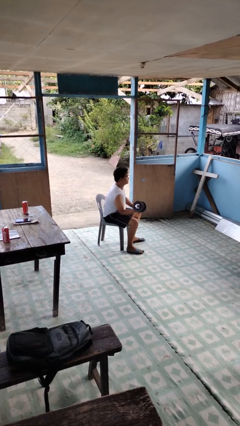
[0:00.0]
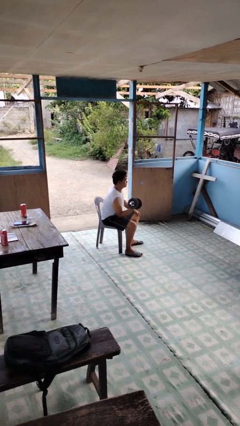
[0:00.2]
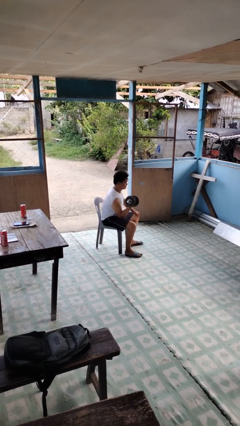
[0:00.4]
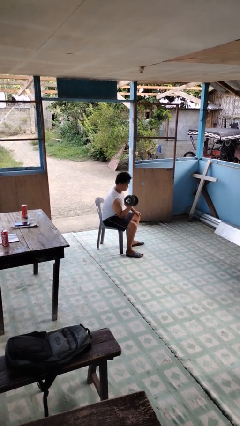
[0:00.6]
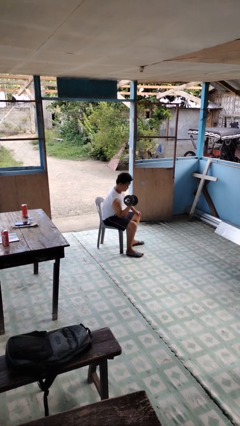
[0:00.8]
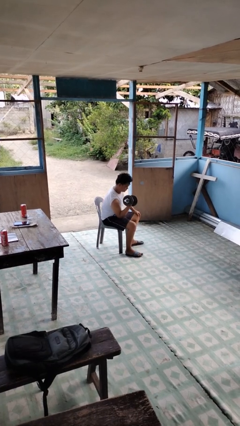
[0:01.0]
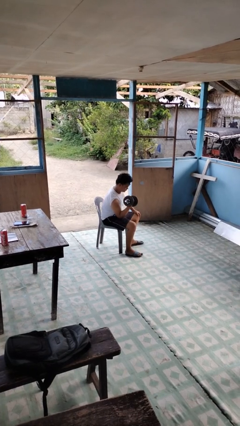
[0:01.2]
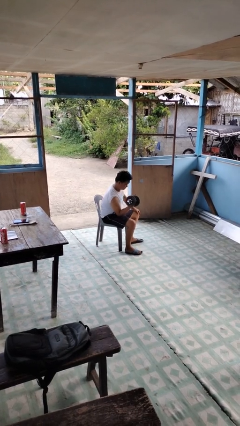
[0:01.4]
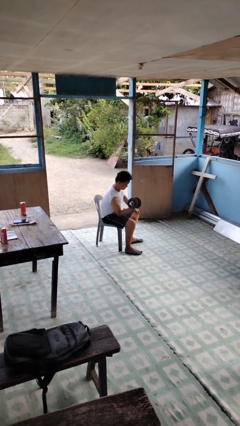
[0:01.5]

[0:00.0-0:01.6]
person lifts dumbbells

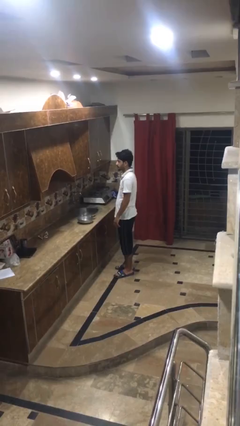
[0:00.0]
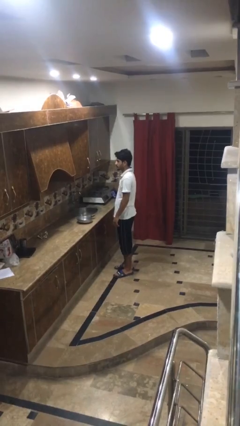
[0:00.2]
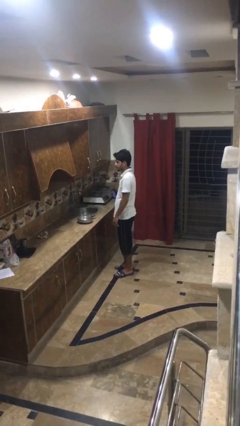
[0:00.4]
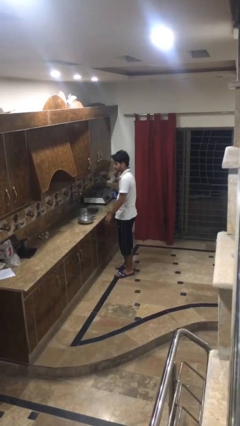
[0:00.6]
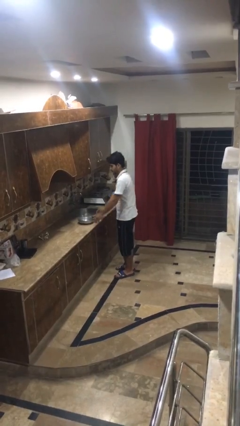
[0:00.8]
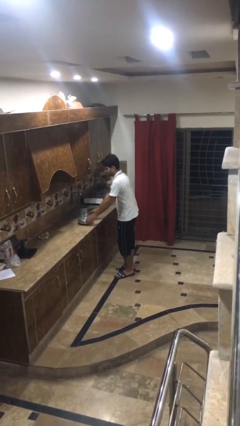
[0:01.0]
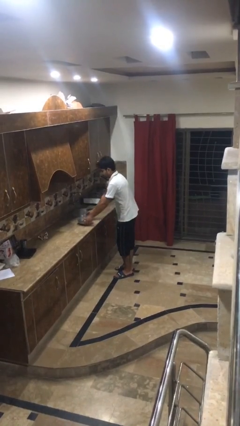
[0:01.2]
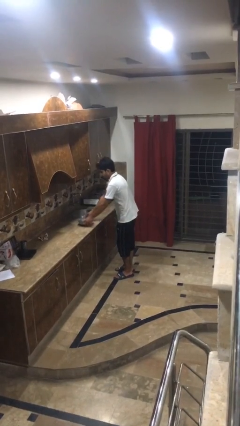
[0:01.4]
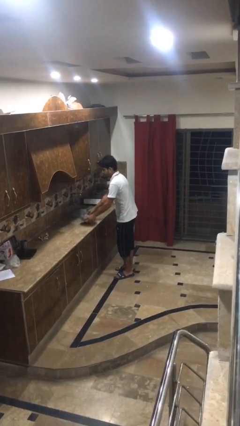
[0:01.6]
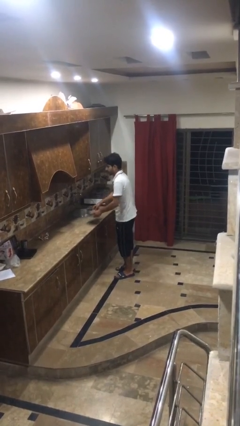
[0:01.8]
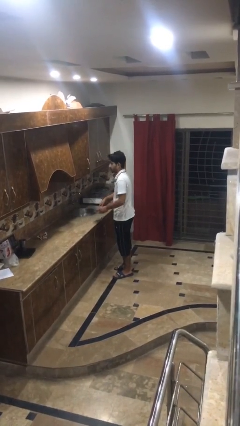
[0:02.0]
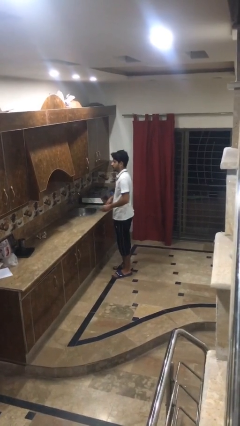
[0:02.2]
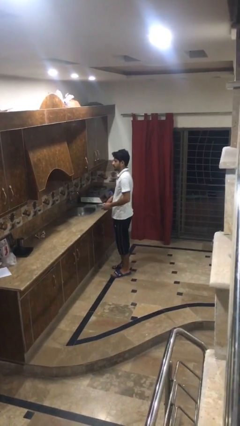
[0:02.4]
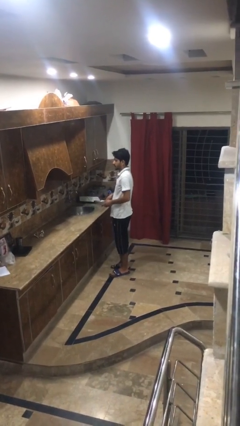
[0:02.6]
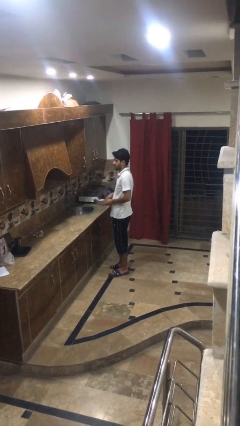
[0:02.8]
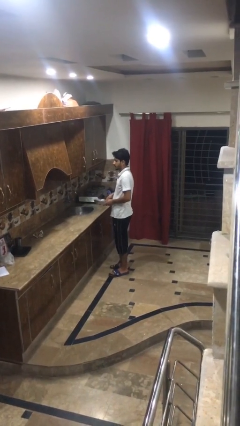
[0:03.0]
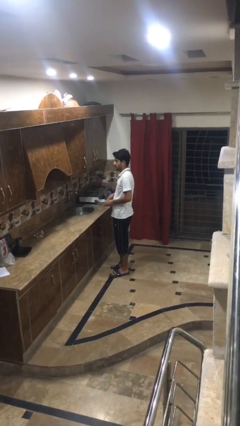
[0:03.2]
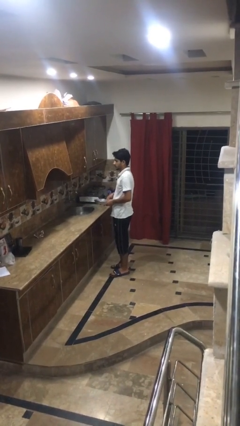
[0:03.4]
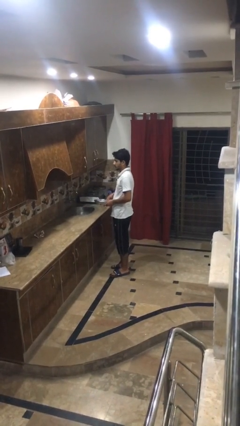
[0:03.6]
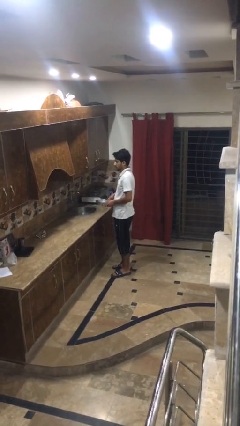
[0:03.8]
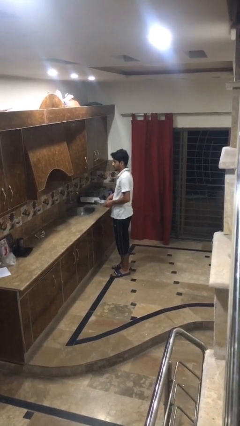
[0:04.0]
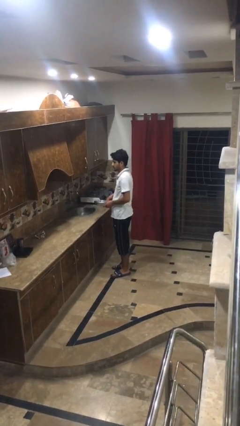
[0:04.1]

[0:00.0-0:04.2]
person picks up object from countertop

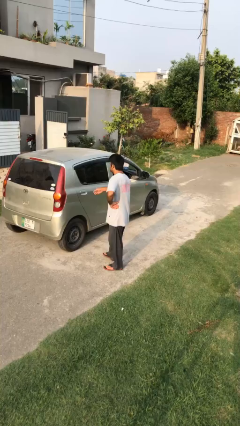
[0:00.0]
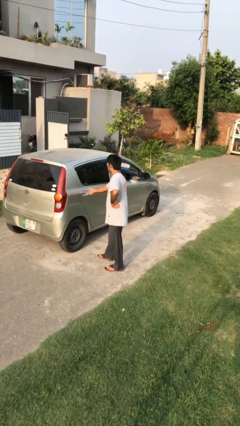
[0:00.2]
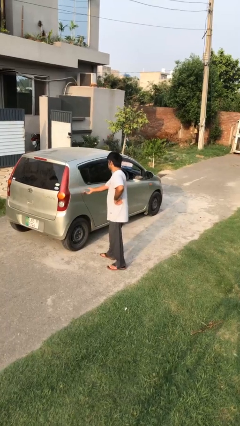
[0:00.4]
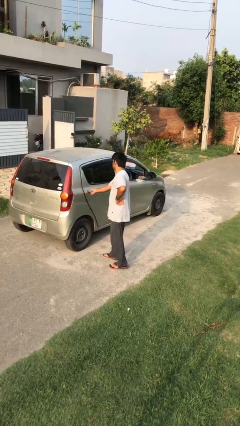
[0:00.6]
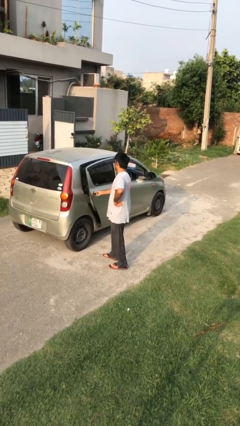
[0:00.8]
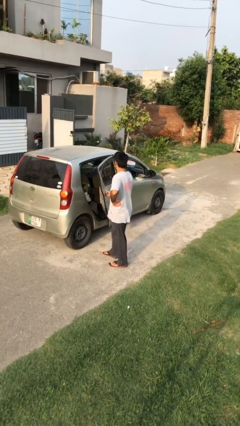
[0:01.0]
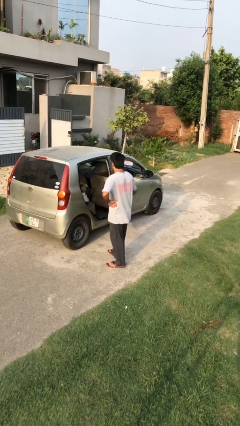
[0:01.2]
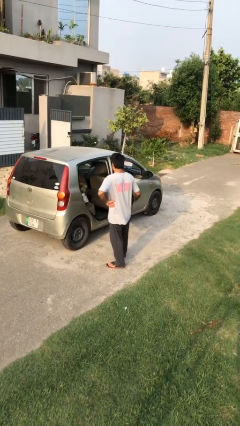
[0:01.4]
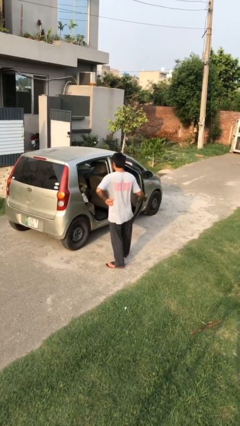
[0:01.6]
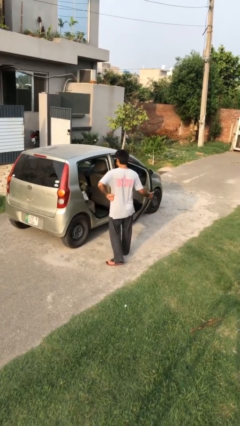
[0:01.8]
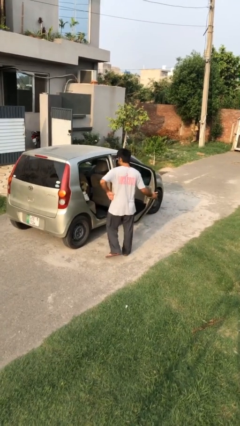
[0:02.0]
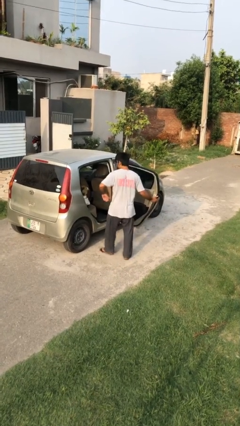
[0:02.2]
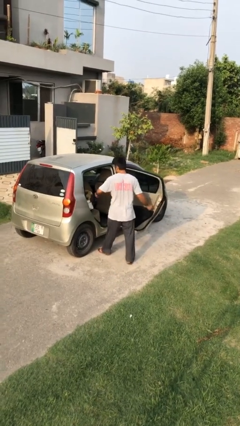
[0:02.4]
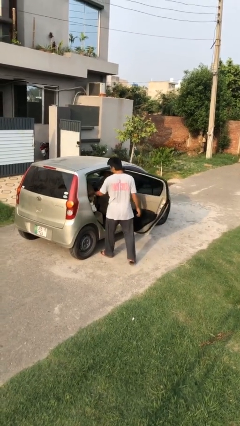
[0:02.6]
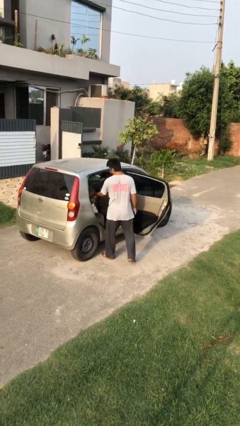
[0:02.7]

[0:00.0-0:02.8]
person opens car door

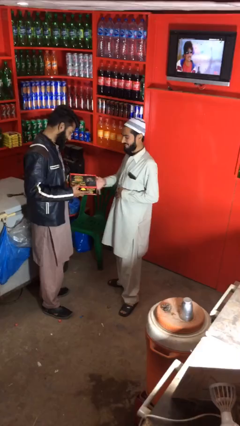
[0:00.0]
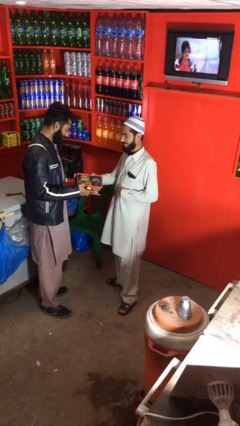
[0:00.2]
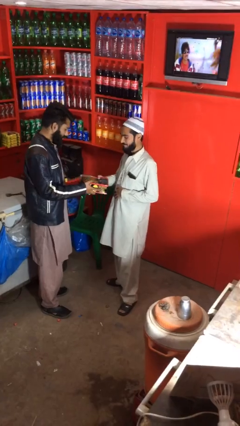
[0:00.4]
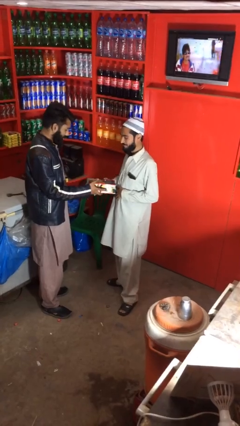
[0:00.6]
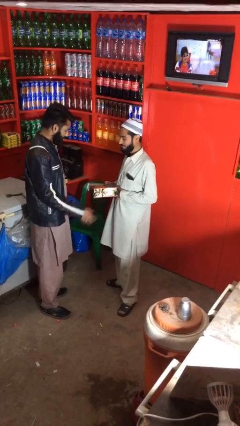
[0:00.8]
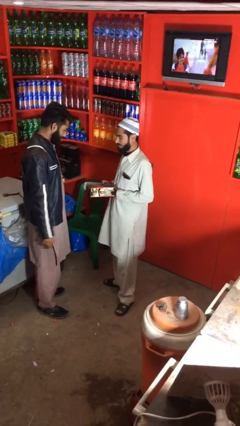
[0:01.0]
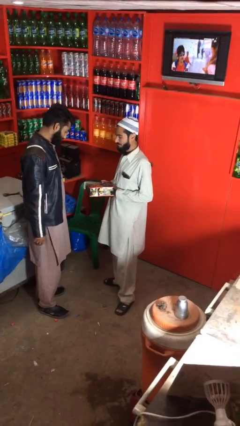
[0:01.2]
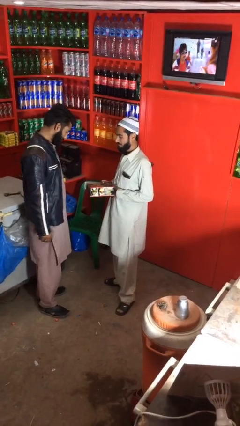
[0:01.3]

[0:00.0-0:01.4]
person transfers object to person

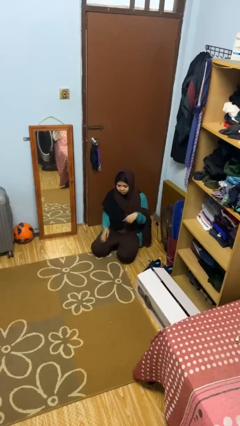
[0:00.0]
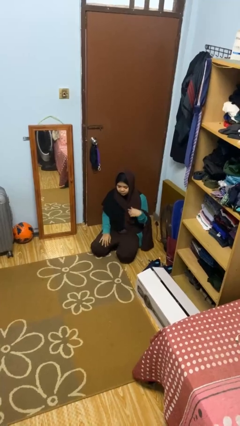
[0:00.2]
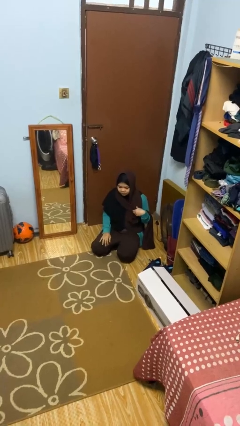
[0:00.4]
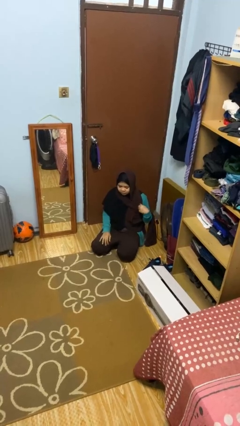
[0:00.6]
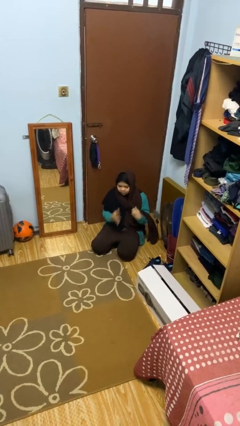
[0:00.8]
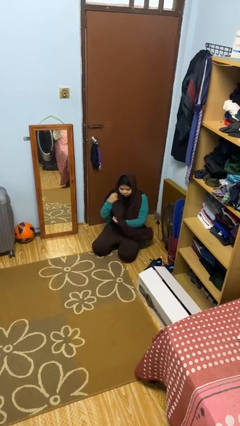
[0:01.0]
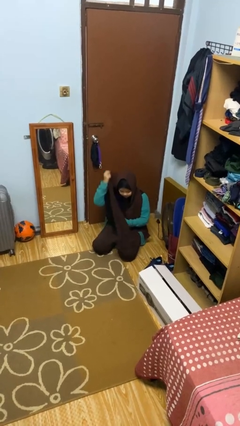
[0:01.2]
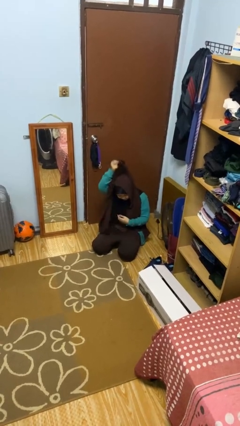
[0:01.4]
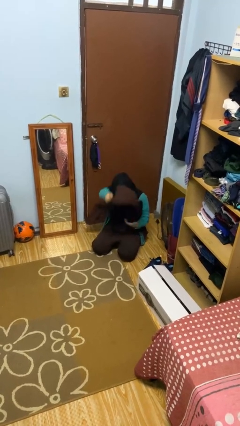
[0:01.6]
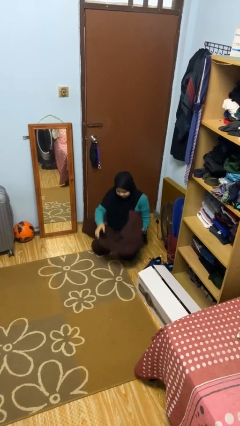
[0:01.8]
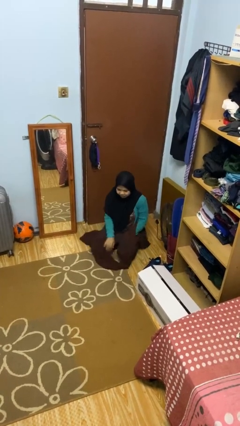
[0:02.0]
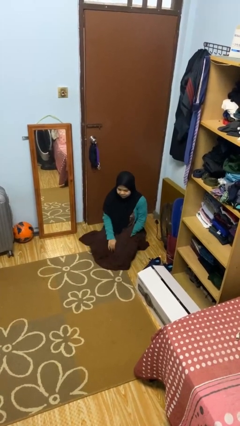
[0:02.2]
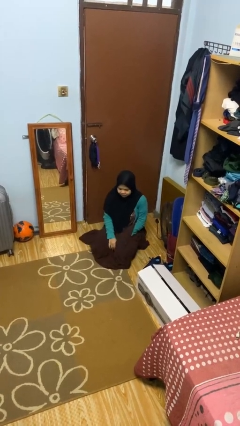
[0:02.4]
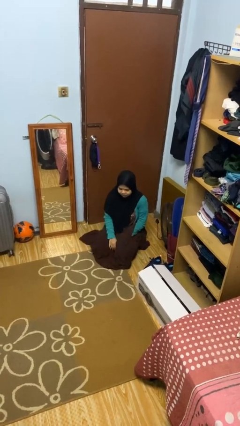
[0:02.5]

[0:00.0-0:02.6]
person takes off scarf

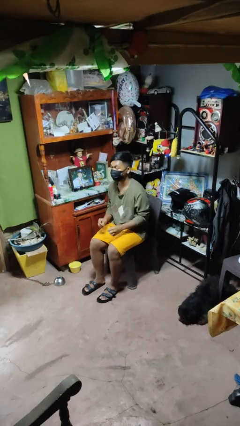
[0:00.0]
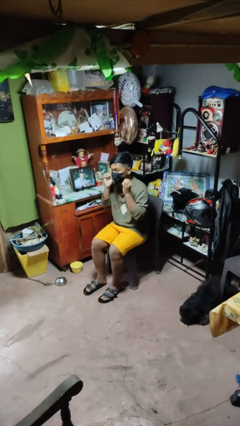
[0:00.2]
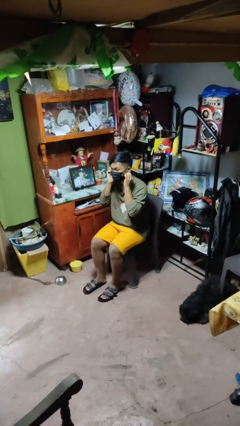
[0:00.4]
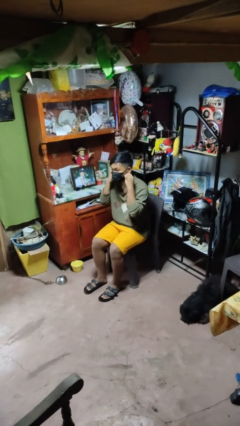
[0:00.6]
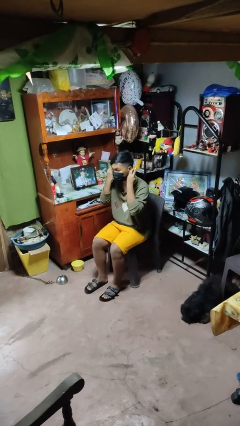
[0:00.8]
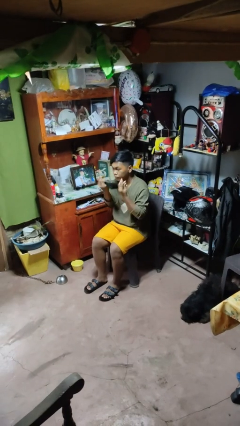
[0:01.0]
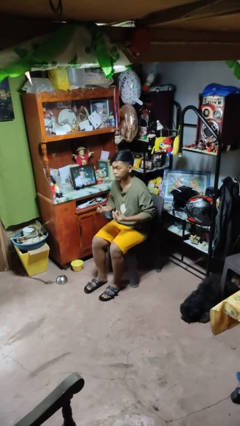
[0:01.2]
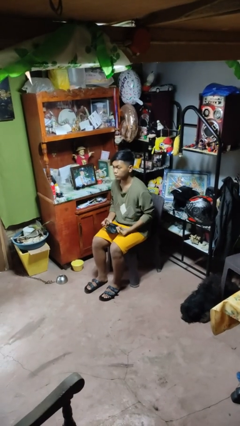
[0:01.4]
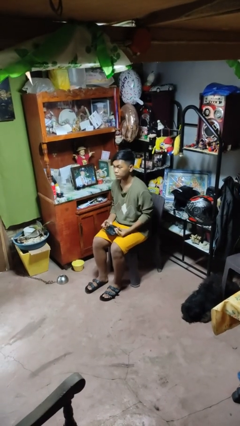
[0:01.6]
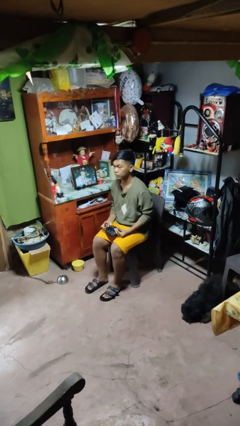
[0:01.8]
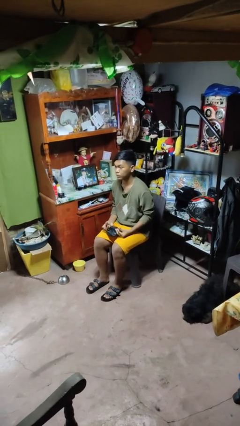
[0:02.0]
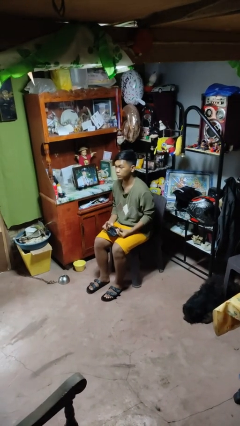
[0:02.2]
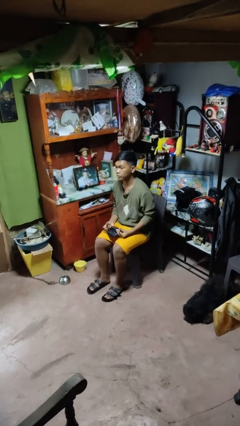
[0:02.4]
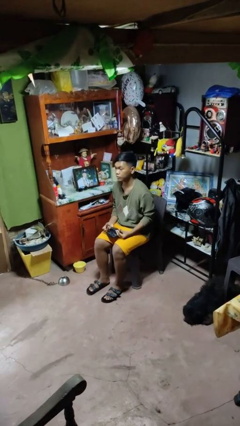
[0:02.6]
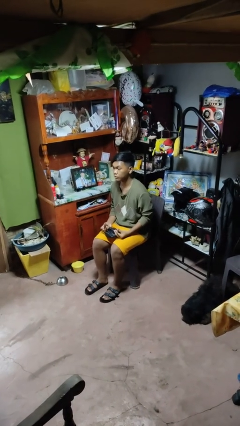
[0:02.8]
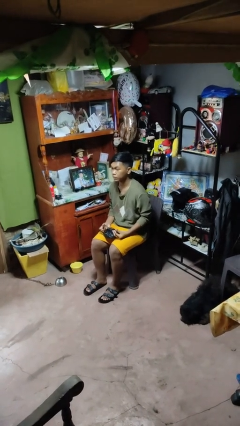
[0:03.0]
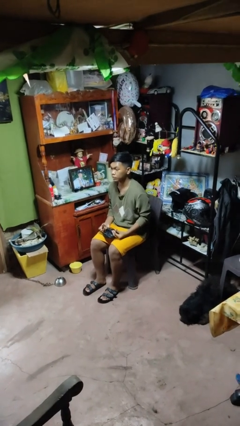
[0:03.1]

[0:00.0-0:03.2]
person takes off facemask

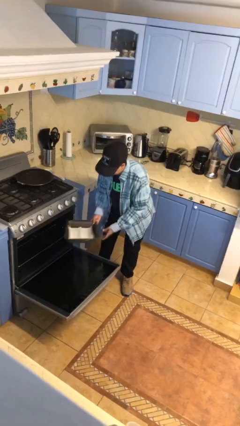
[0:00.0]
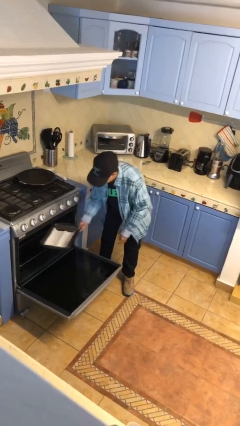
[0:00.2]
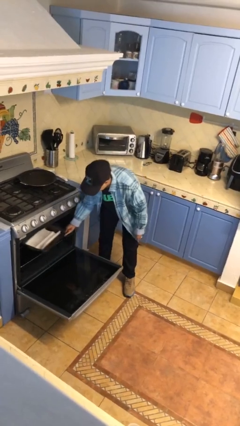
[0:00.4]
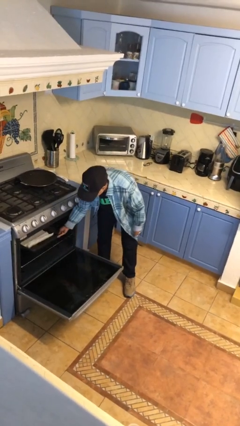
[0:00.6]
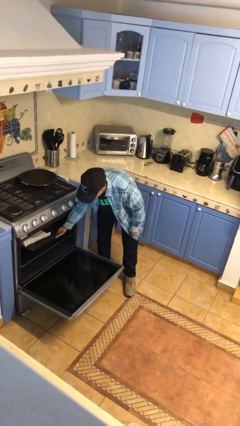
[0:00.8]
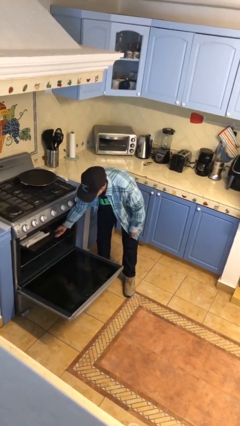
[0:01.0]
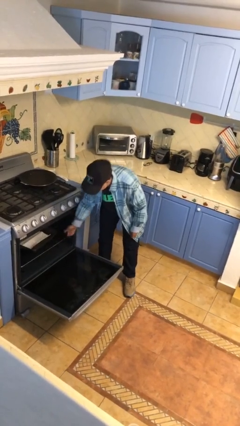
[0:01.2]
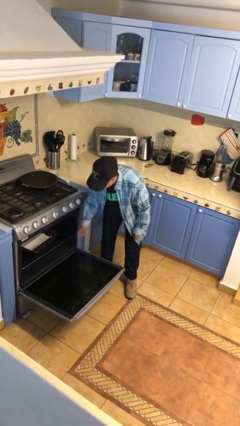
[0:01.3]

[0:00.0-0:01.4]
person puts object into oven
